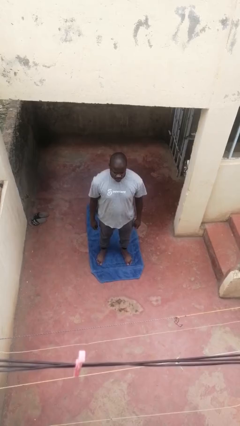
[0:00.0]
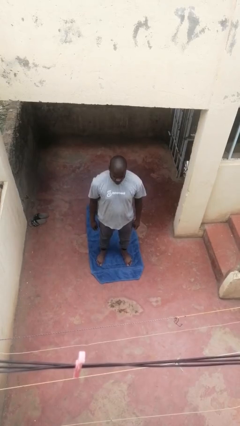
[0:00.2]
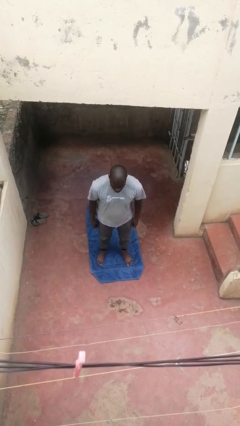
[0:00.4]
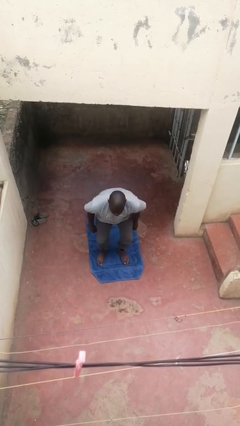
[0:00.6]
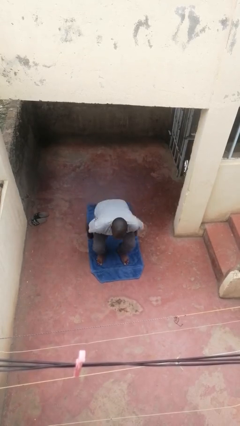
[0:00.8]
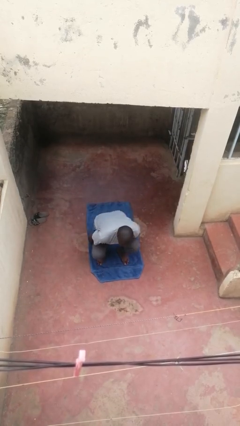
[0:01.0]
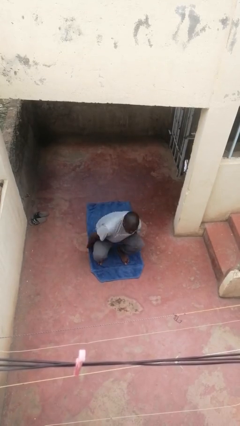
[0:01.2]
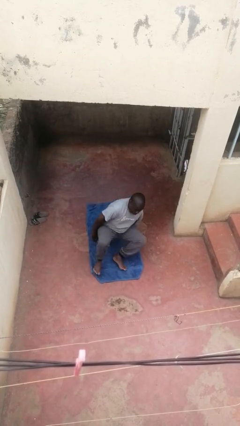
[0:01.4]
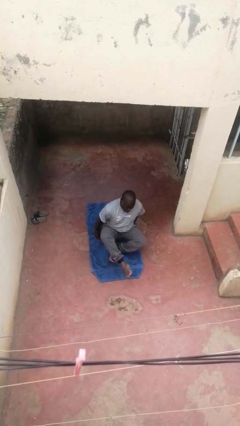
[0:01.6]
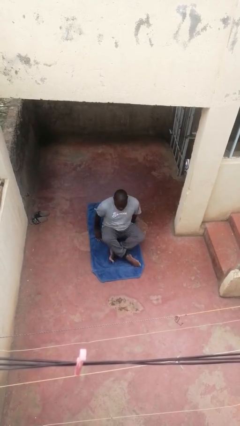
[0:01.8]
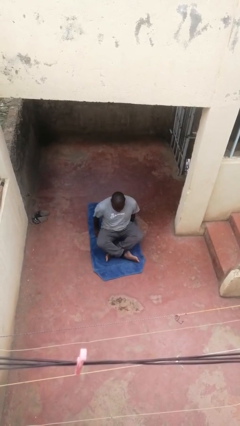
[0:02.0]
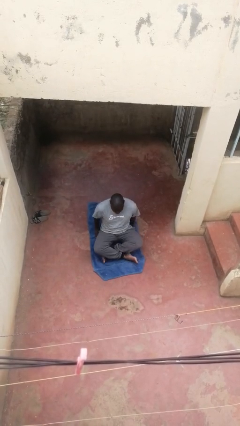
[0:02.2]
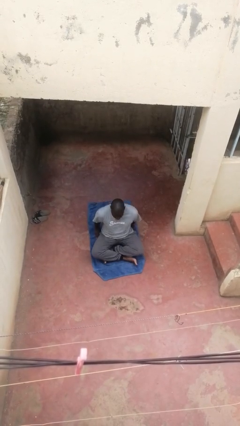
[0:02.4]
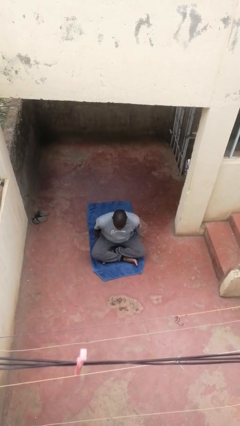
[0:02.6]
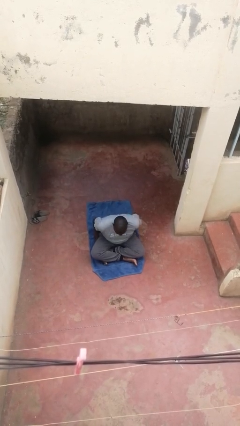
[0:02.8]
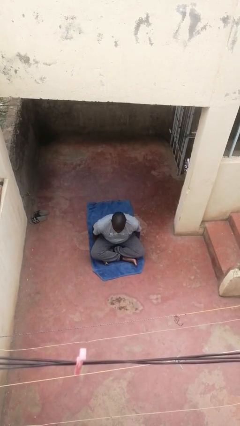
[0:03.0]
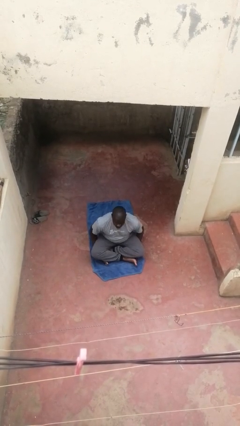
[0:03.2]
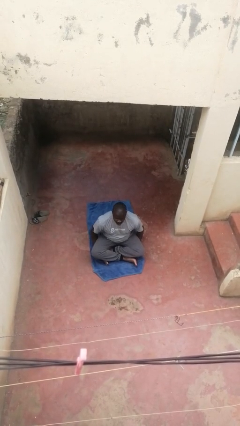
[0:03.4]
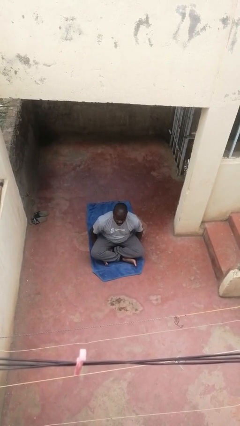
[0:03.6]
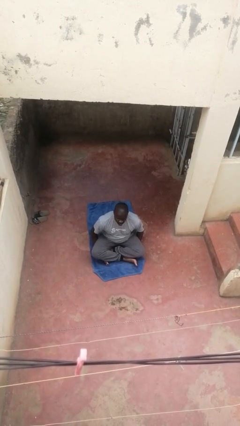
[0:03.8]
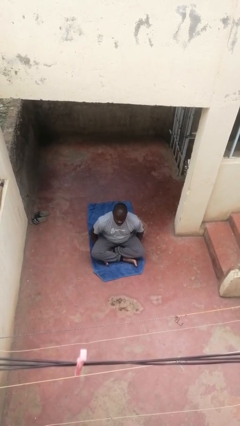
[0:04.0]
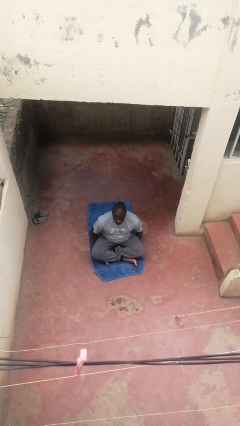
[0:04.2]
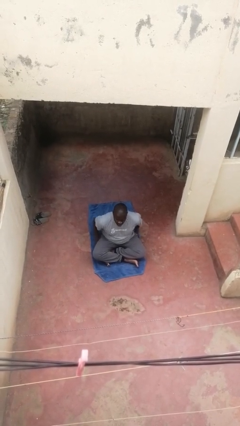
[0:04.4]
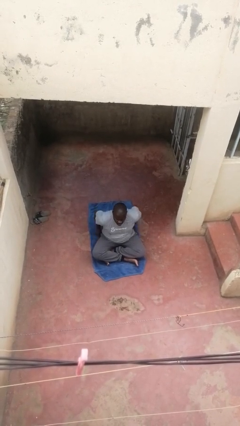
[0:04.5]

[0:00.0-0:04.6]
person sits crisscross

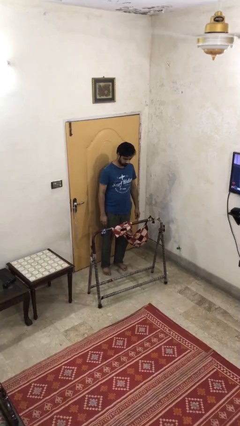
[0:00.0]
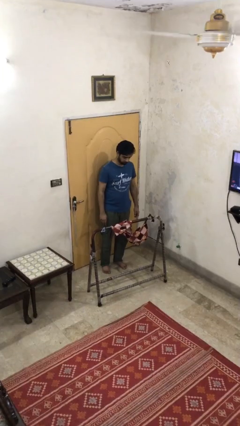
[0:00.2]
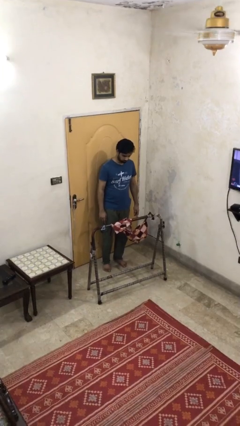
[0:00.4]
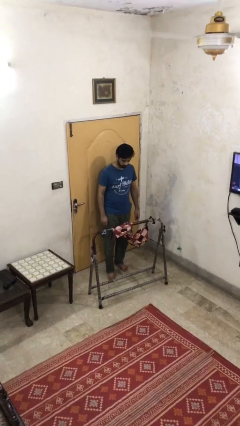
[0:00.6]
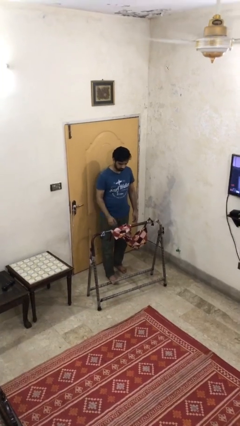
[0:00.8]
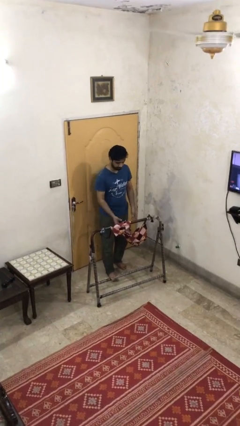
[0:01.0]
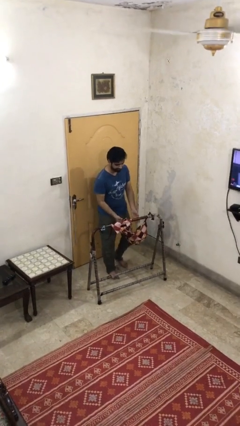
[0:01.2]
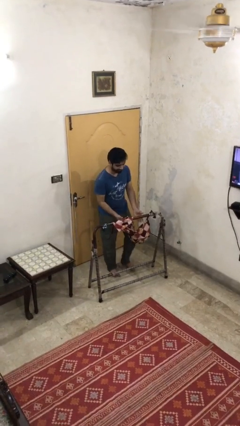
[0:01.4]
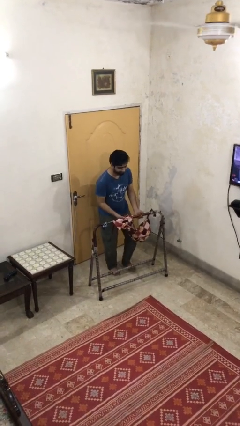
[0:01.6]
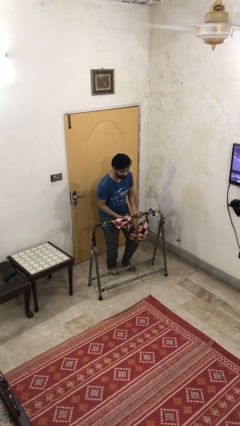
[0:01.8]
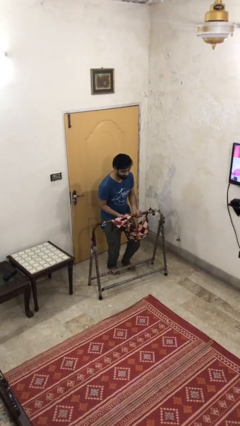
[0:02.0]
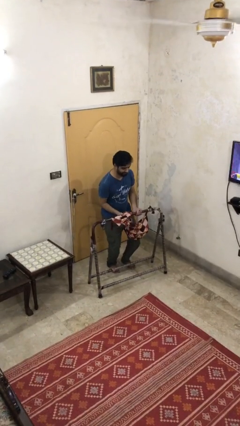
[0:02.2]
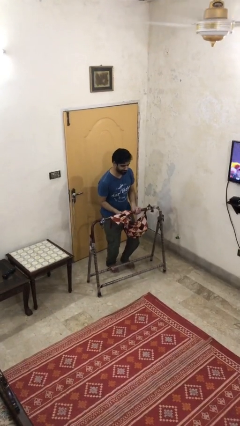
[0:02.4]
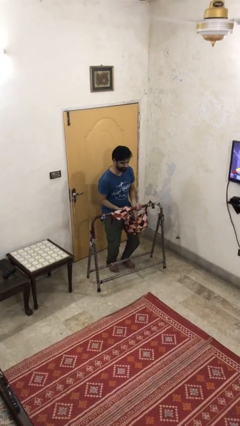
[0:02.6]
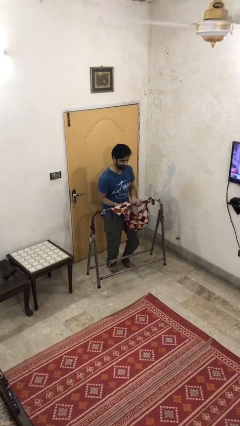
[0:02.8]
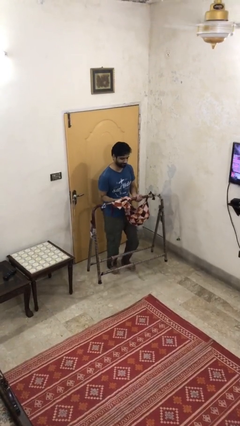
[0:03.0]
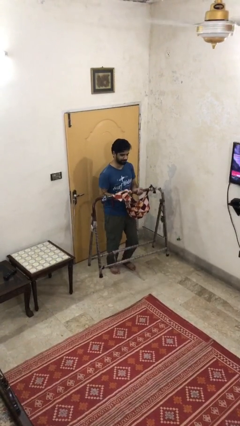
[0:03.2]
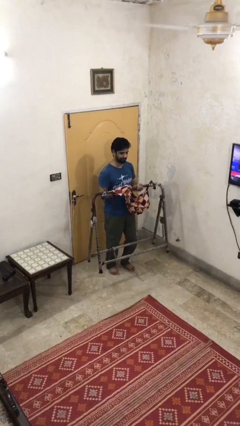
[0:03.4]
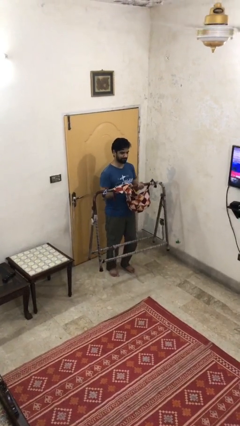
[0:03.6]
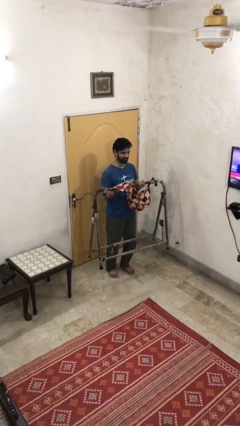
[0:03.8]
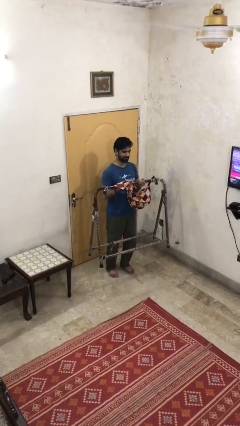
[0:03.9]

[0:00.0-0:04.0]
person picks up object from floor

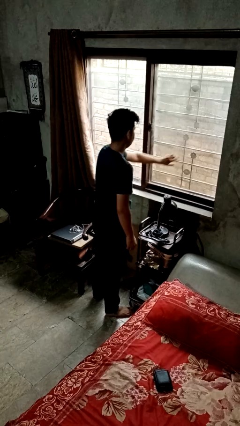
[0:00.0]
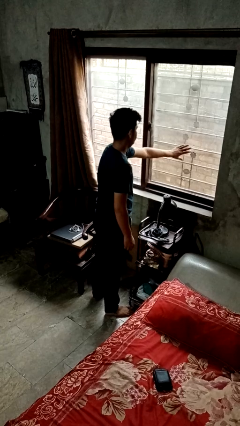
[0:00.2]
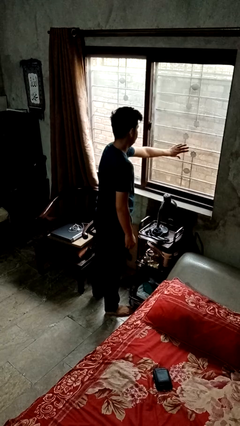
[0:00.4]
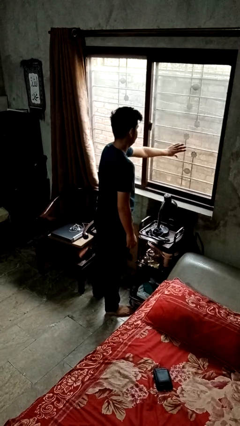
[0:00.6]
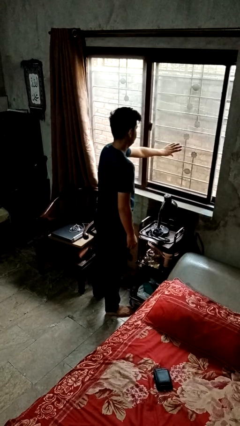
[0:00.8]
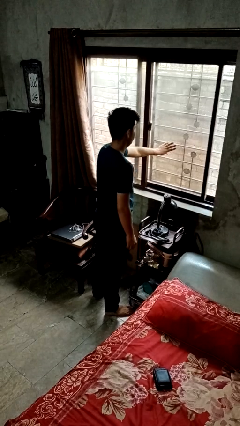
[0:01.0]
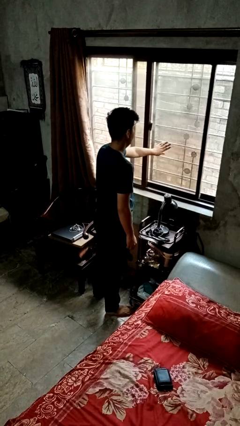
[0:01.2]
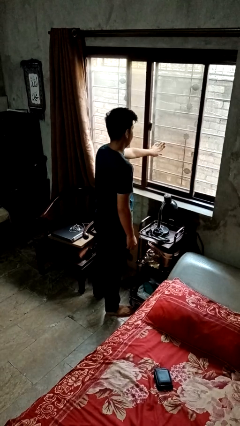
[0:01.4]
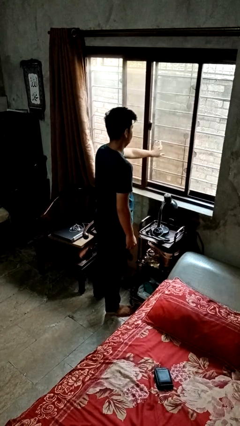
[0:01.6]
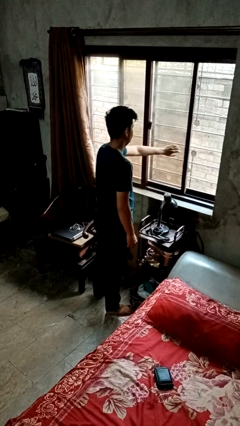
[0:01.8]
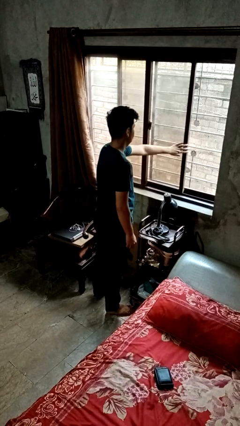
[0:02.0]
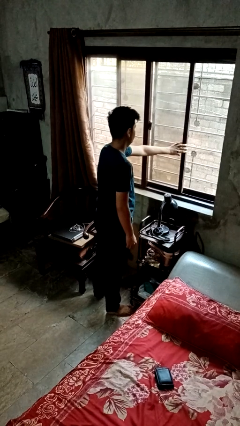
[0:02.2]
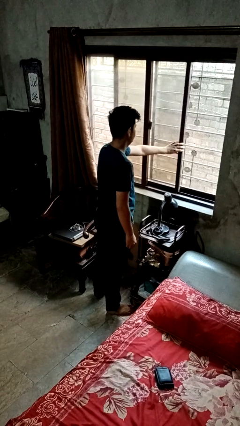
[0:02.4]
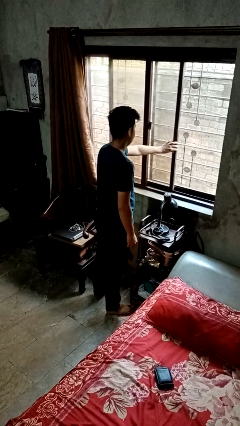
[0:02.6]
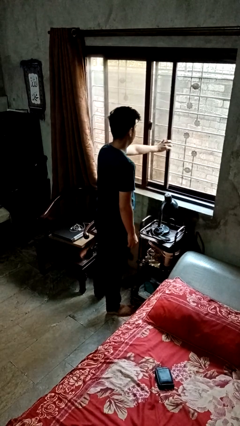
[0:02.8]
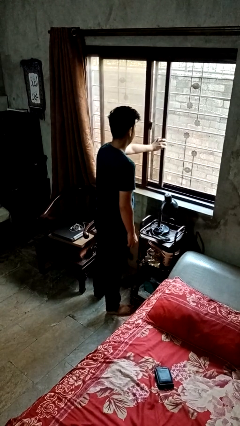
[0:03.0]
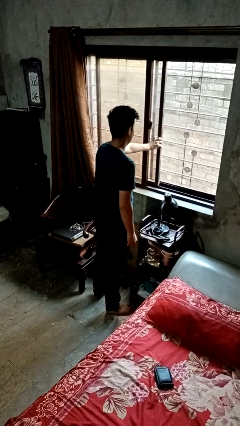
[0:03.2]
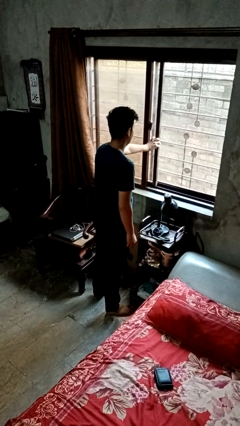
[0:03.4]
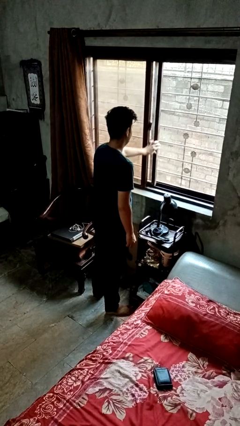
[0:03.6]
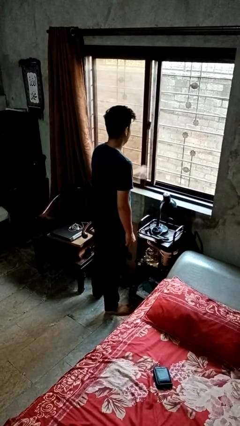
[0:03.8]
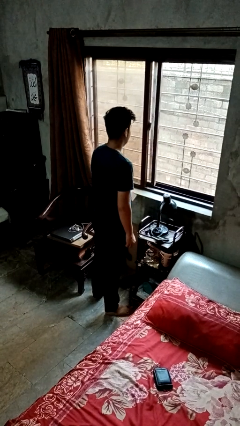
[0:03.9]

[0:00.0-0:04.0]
person opens home window

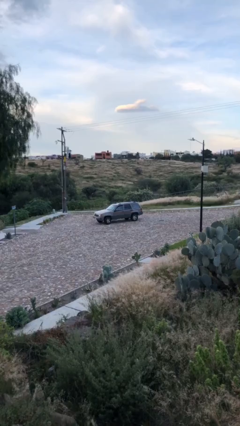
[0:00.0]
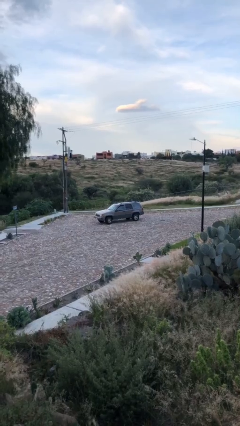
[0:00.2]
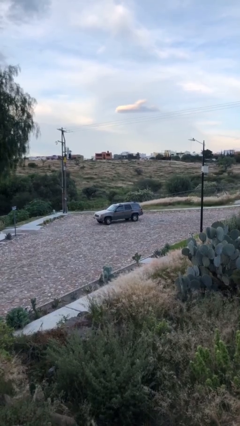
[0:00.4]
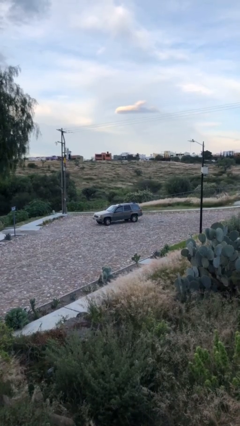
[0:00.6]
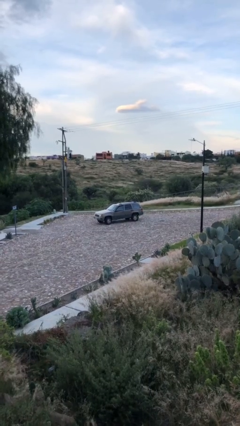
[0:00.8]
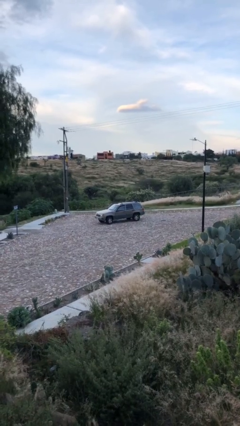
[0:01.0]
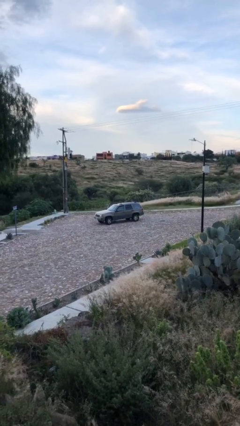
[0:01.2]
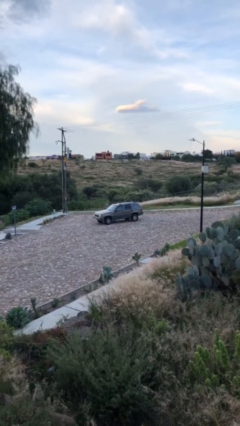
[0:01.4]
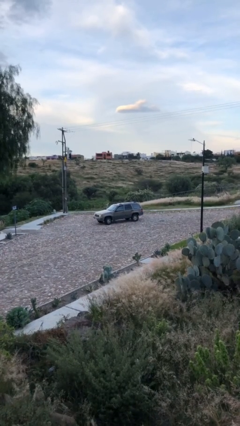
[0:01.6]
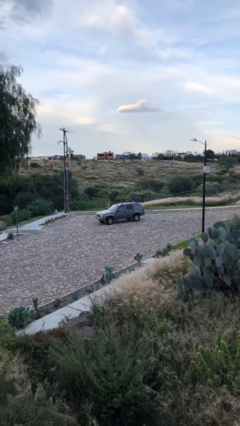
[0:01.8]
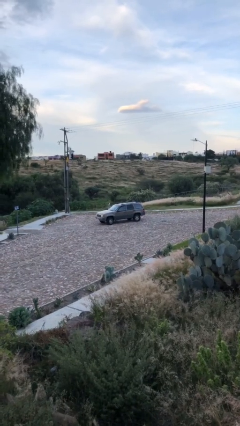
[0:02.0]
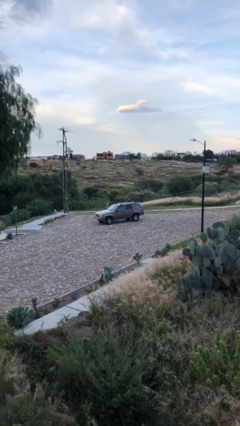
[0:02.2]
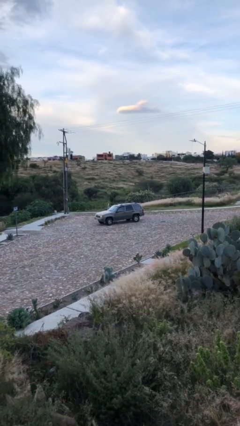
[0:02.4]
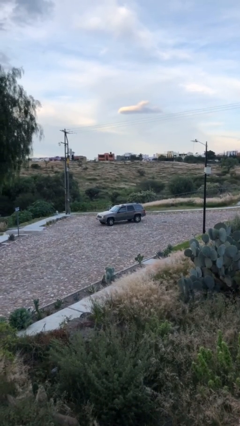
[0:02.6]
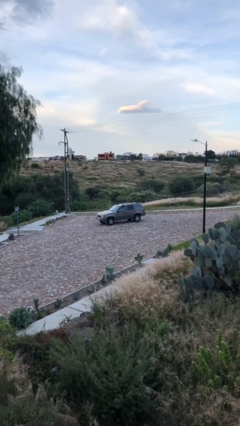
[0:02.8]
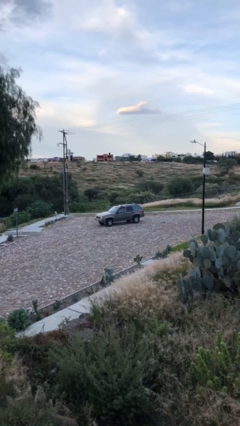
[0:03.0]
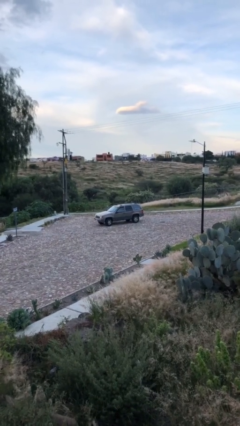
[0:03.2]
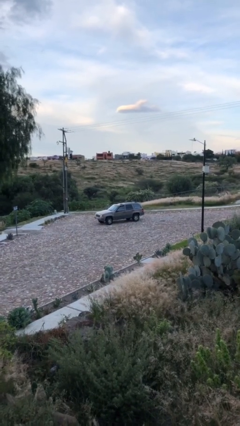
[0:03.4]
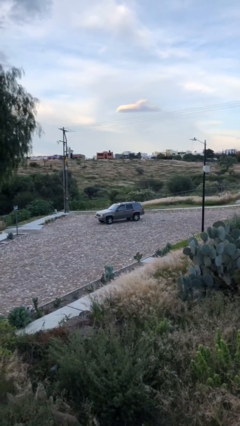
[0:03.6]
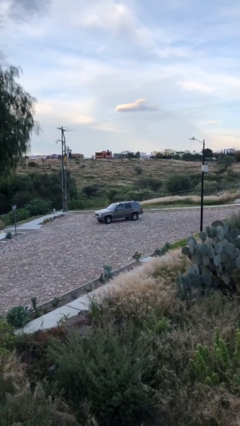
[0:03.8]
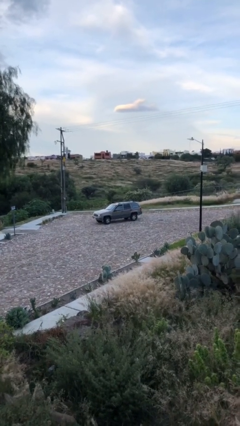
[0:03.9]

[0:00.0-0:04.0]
car drops off person

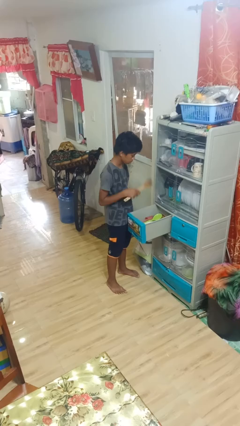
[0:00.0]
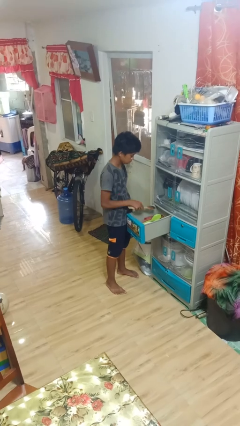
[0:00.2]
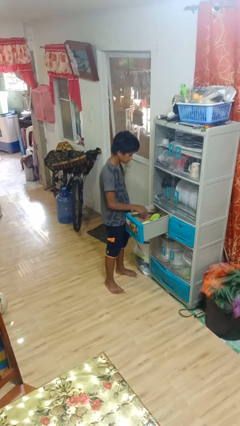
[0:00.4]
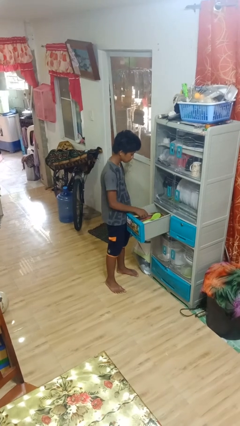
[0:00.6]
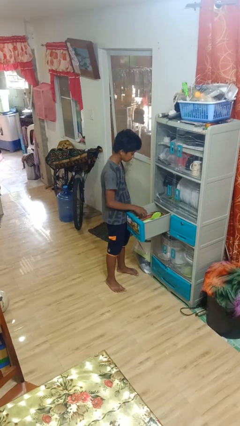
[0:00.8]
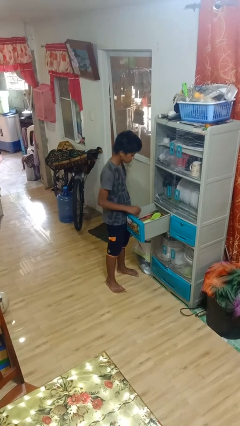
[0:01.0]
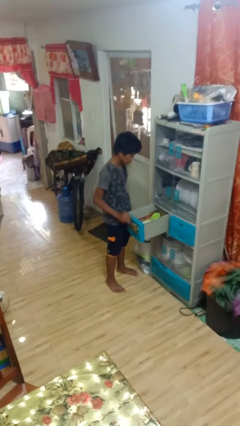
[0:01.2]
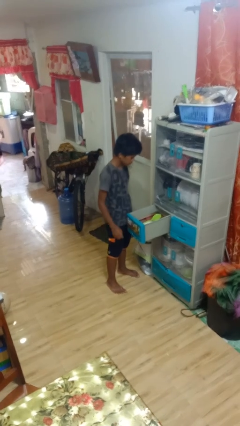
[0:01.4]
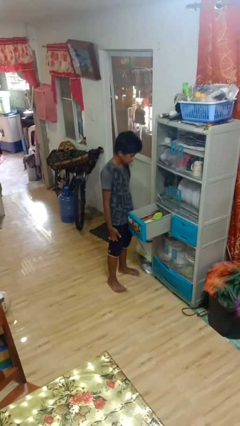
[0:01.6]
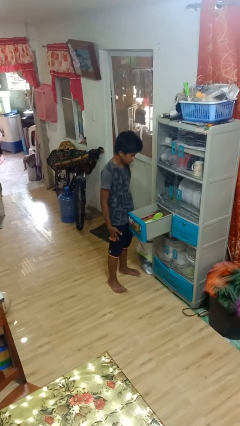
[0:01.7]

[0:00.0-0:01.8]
person puts object into kitchen drawer
